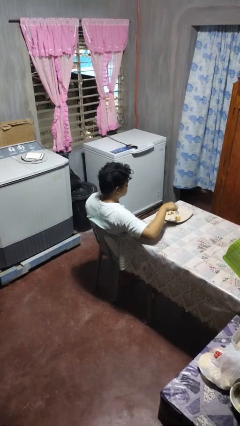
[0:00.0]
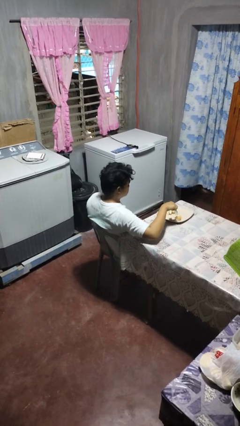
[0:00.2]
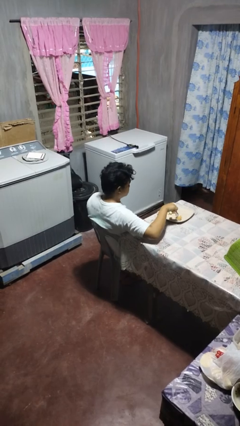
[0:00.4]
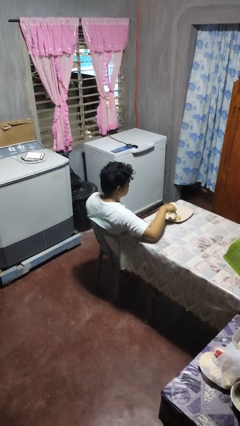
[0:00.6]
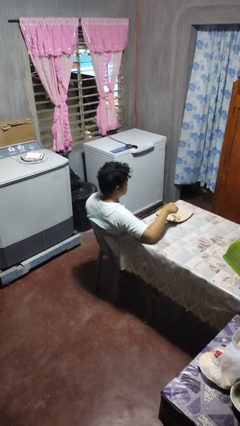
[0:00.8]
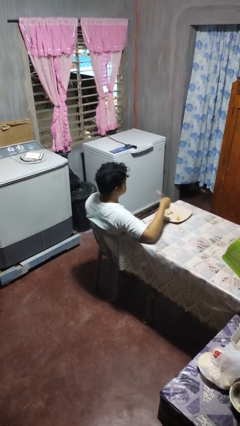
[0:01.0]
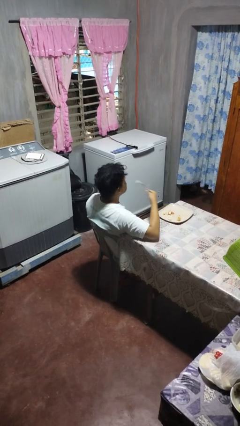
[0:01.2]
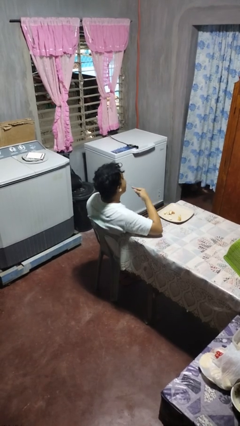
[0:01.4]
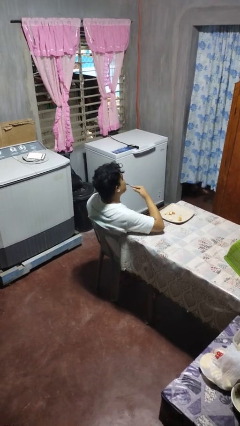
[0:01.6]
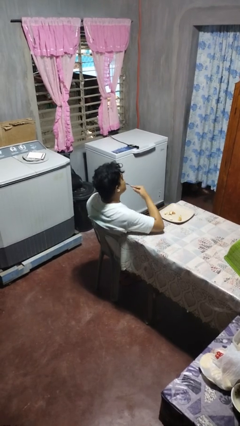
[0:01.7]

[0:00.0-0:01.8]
person eats with utensil

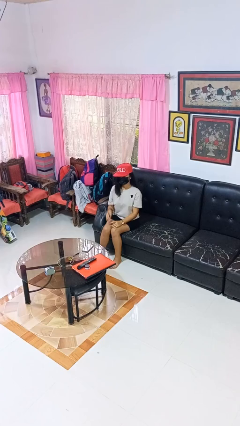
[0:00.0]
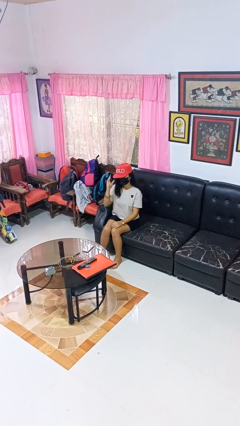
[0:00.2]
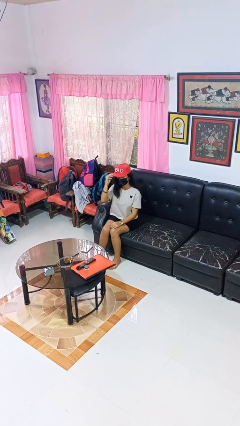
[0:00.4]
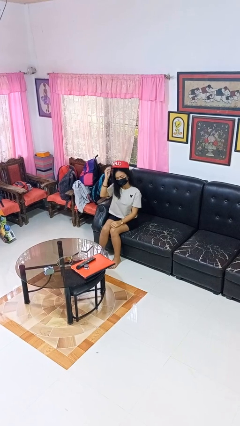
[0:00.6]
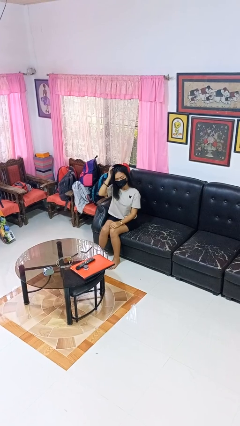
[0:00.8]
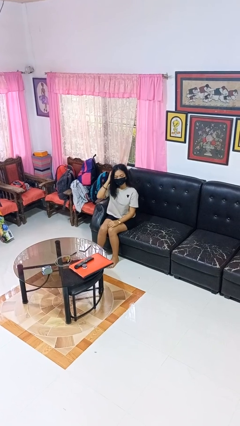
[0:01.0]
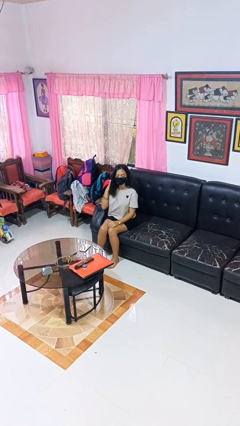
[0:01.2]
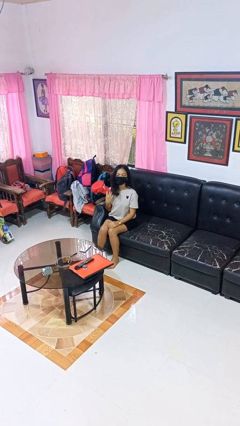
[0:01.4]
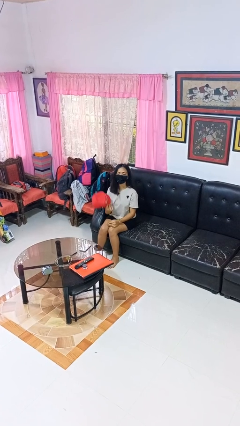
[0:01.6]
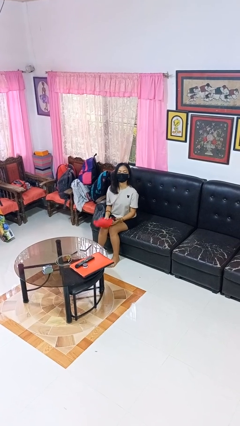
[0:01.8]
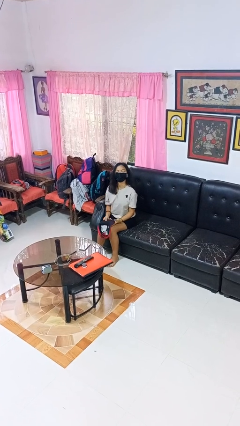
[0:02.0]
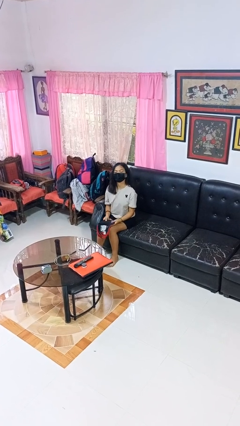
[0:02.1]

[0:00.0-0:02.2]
person takes off hat

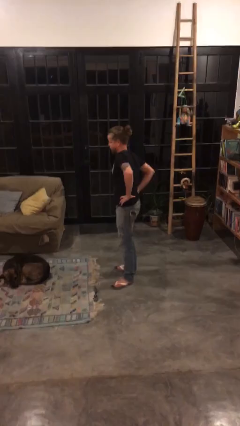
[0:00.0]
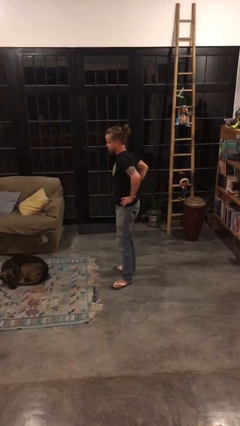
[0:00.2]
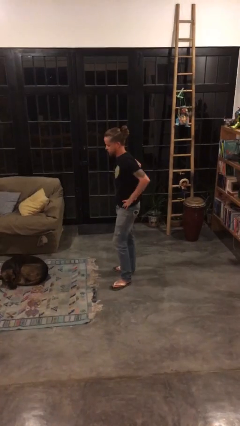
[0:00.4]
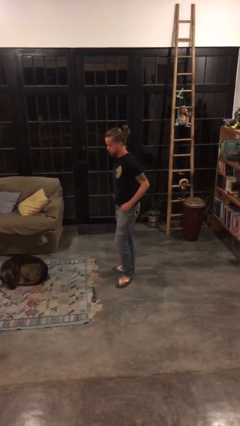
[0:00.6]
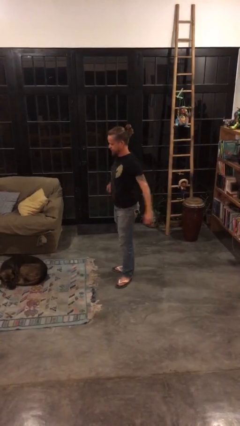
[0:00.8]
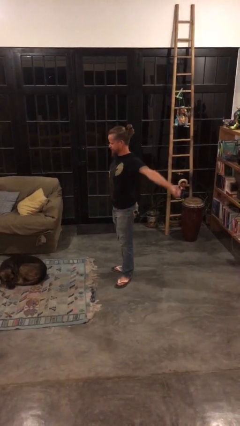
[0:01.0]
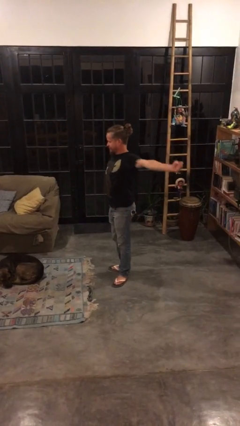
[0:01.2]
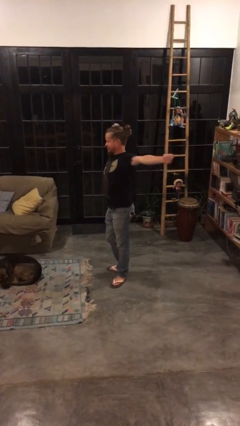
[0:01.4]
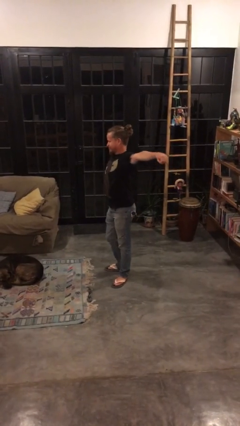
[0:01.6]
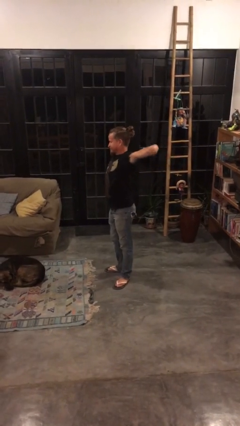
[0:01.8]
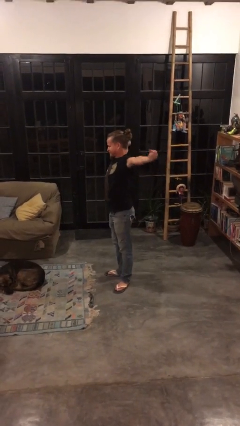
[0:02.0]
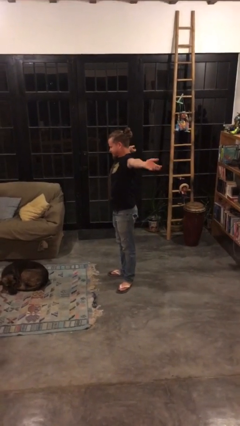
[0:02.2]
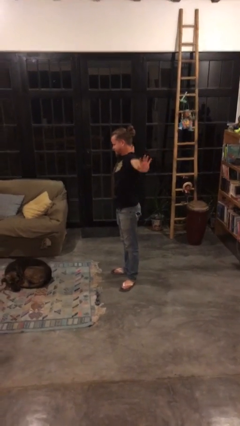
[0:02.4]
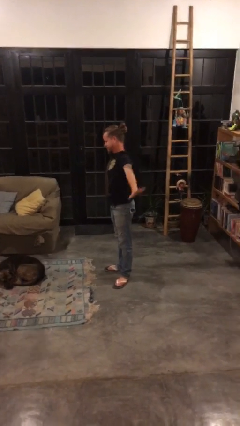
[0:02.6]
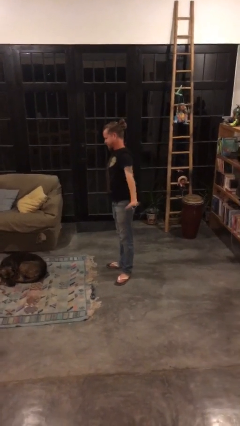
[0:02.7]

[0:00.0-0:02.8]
person stretches arms to side

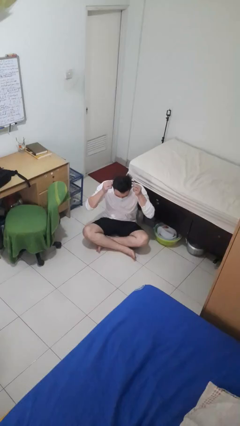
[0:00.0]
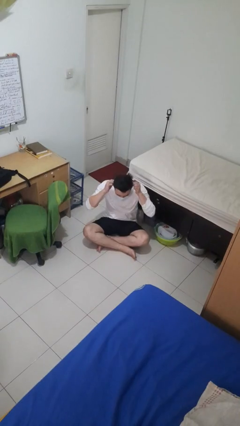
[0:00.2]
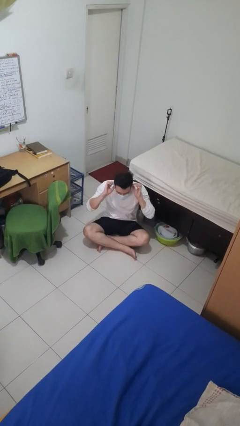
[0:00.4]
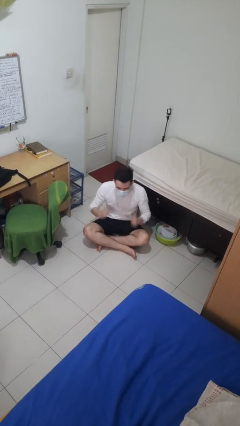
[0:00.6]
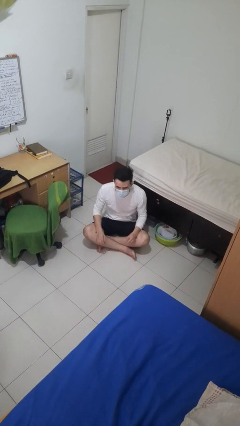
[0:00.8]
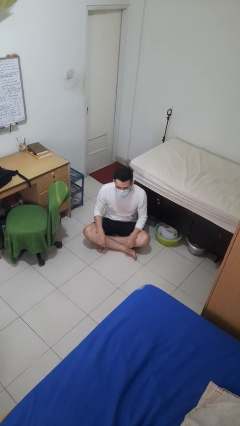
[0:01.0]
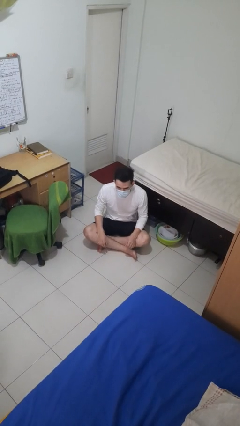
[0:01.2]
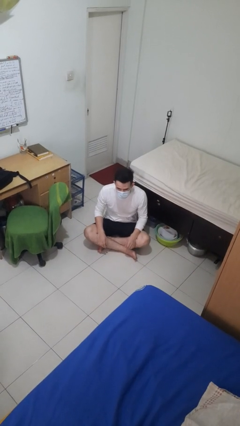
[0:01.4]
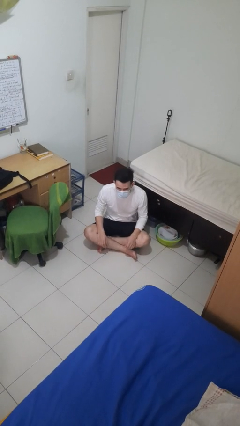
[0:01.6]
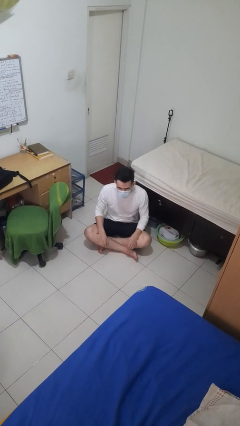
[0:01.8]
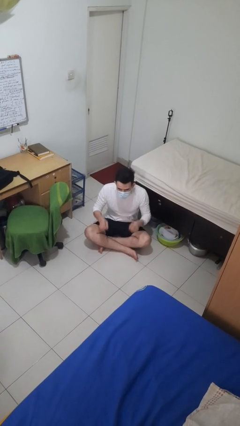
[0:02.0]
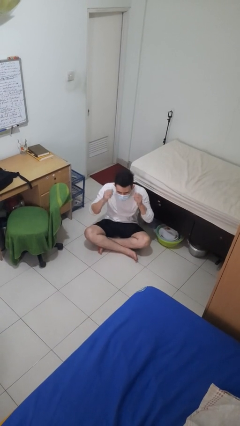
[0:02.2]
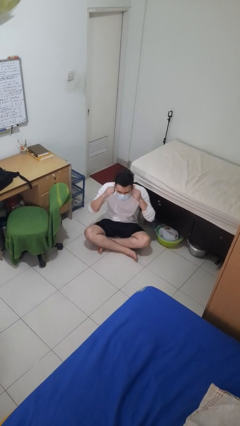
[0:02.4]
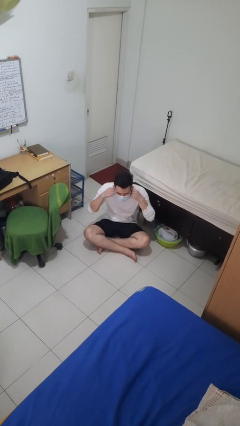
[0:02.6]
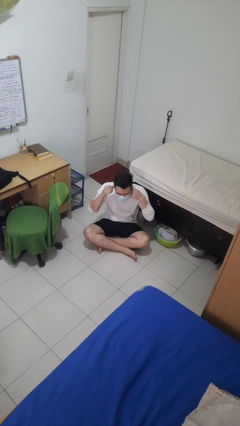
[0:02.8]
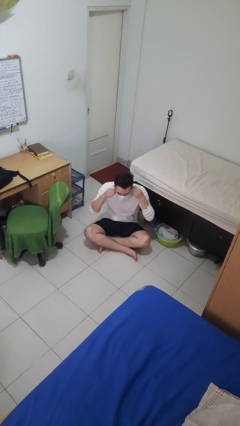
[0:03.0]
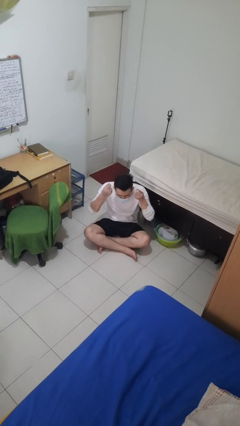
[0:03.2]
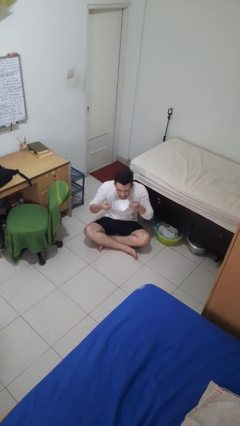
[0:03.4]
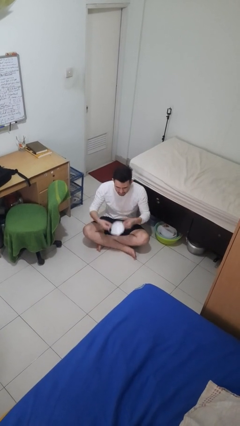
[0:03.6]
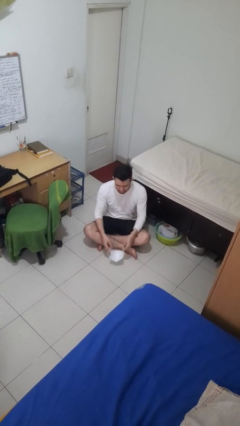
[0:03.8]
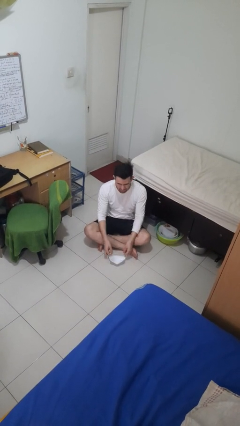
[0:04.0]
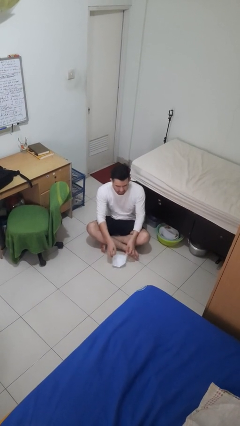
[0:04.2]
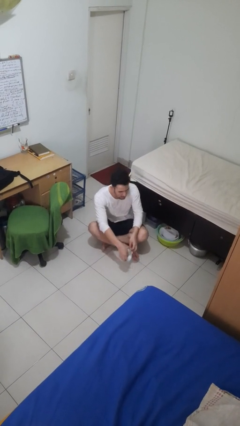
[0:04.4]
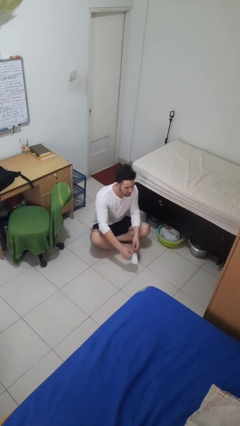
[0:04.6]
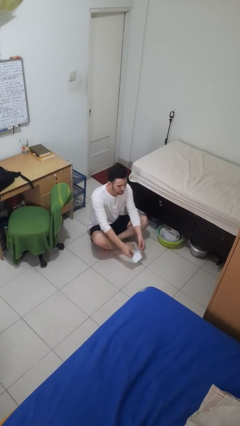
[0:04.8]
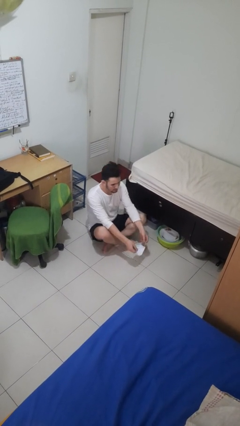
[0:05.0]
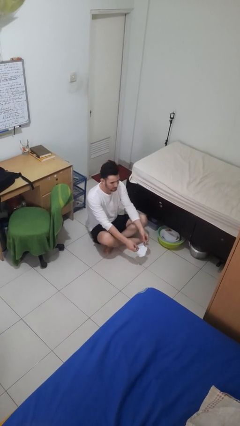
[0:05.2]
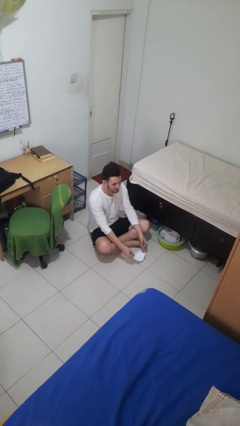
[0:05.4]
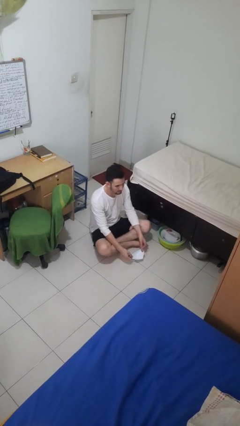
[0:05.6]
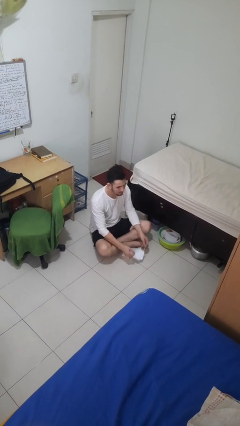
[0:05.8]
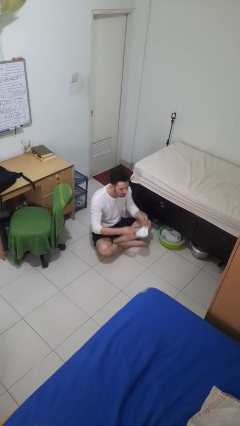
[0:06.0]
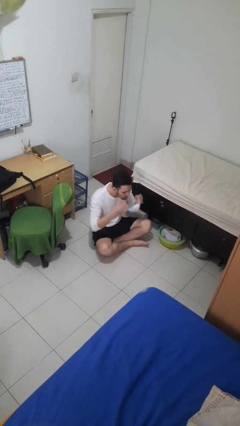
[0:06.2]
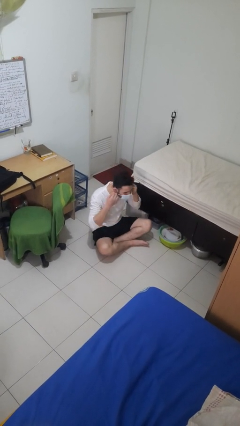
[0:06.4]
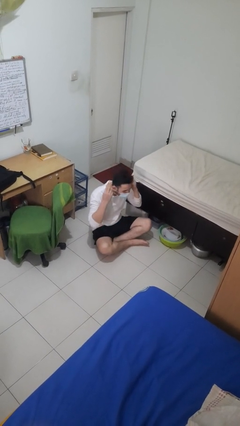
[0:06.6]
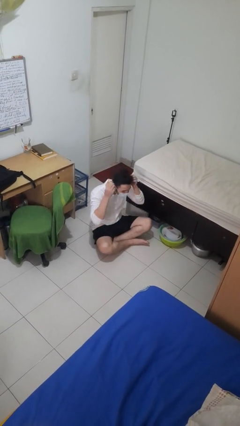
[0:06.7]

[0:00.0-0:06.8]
person puts on facemask

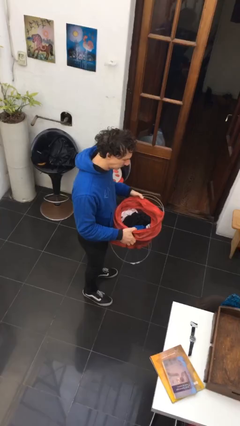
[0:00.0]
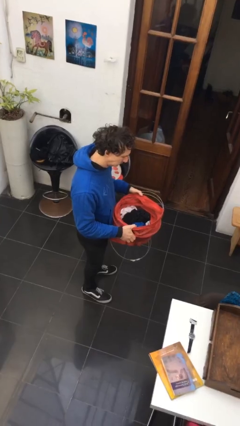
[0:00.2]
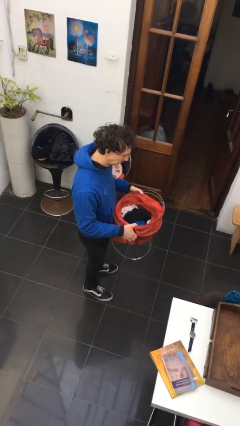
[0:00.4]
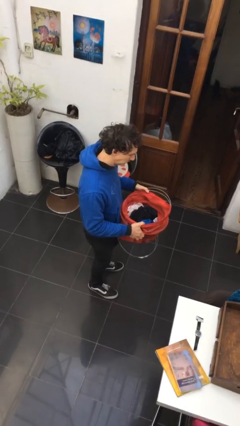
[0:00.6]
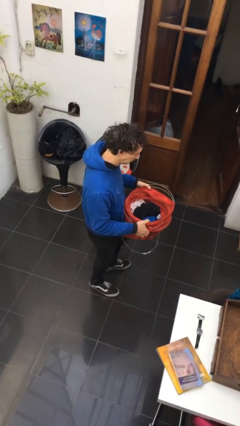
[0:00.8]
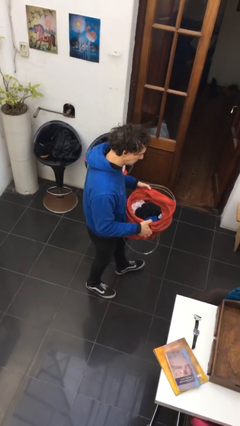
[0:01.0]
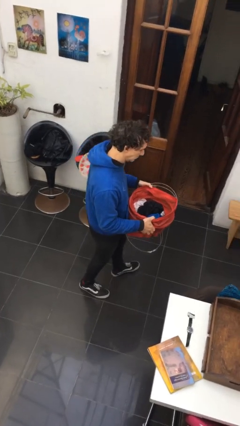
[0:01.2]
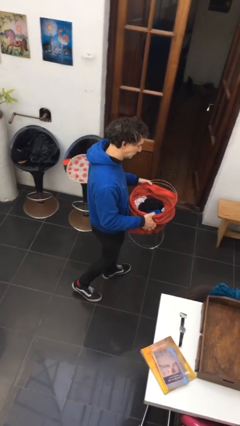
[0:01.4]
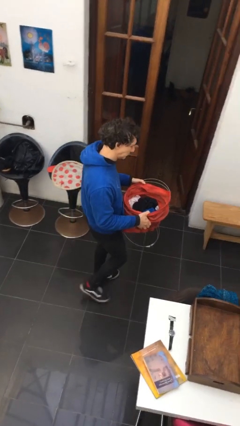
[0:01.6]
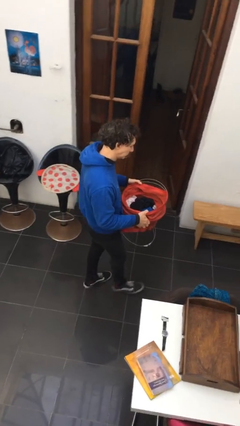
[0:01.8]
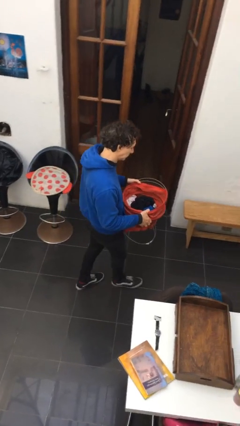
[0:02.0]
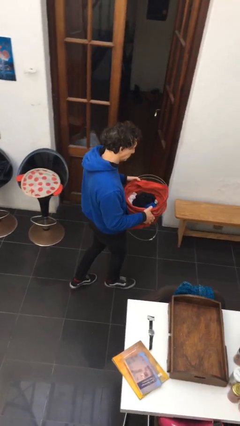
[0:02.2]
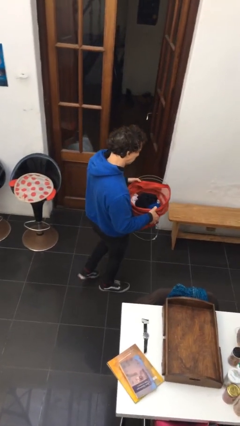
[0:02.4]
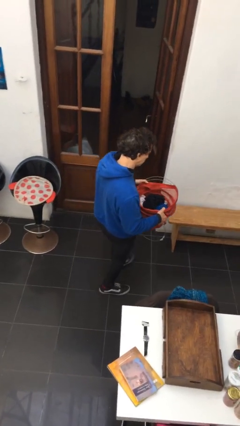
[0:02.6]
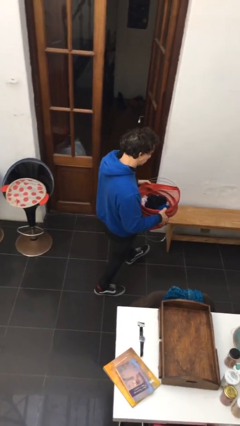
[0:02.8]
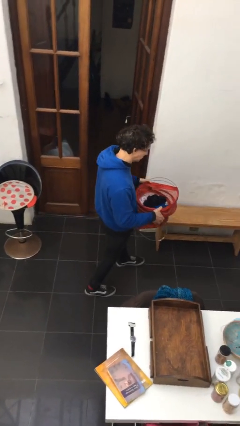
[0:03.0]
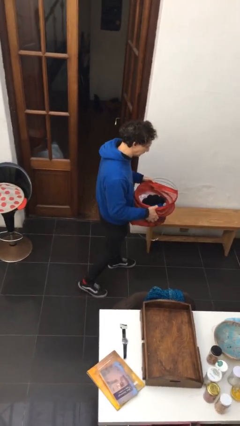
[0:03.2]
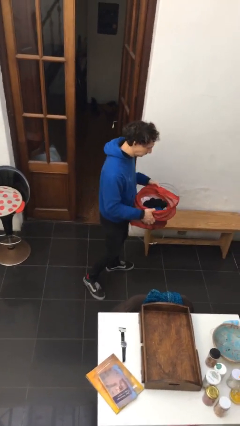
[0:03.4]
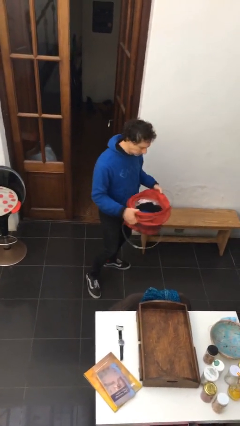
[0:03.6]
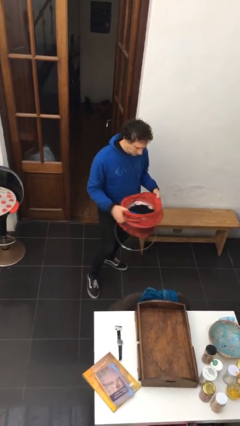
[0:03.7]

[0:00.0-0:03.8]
person carries laundry basket
